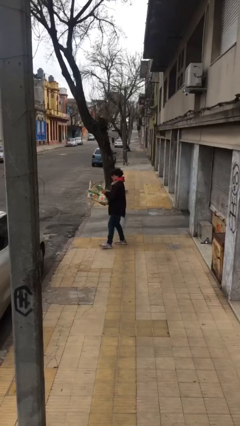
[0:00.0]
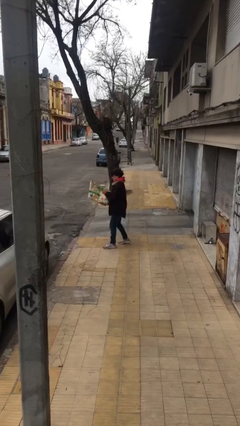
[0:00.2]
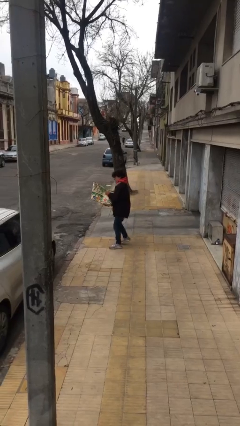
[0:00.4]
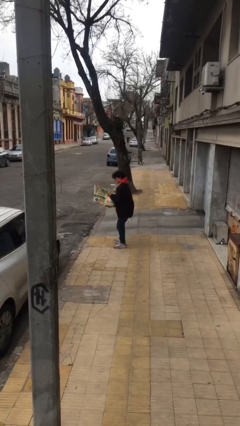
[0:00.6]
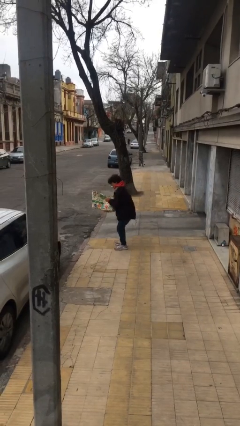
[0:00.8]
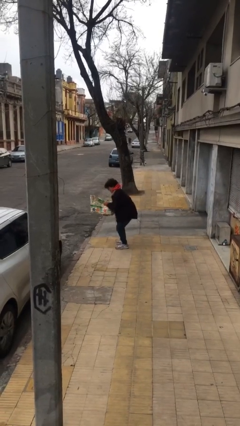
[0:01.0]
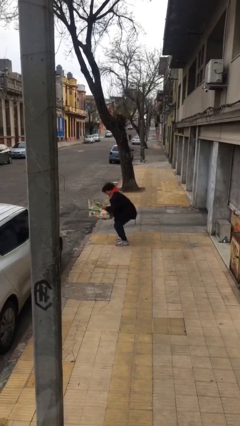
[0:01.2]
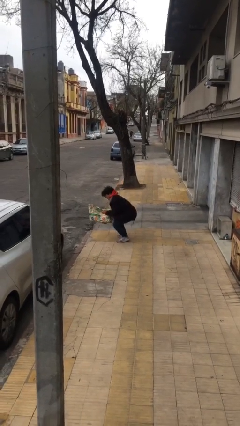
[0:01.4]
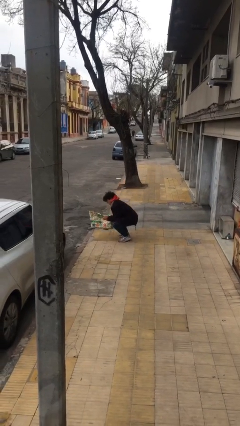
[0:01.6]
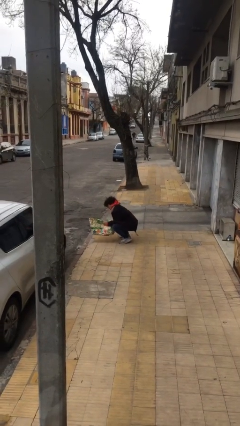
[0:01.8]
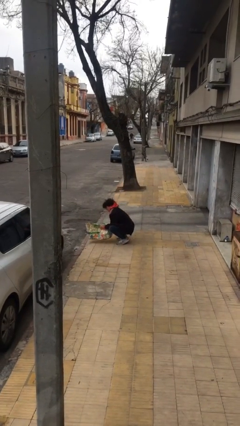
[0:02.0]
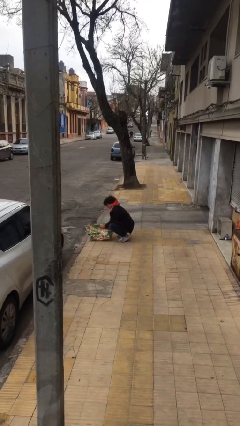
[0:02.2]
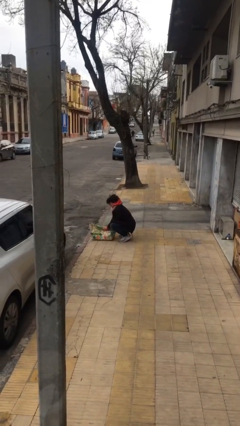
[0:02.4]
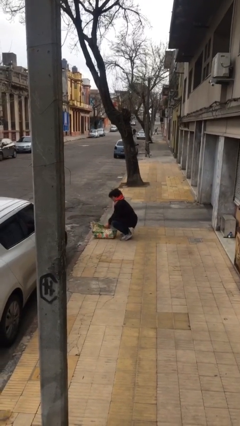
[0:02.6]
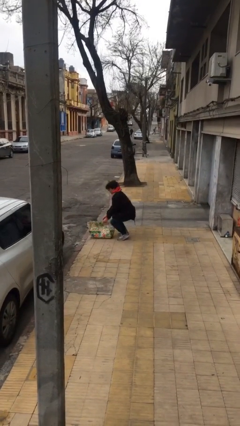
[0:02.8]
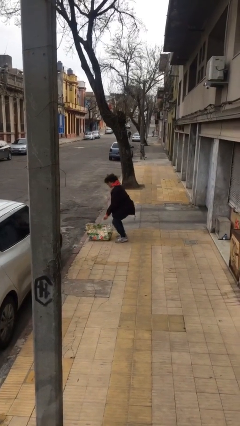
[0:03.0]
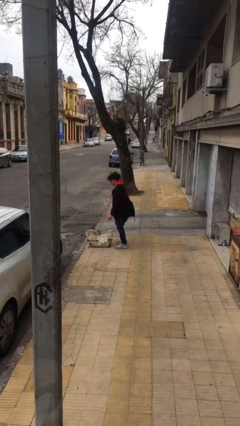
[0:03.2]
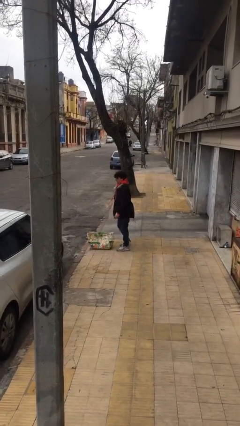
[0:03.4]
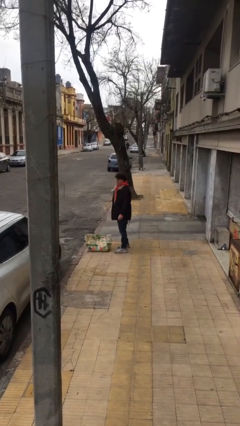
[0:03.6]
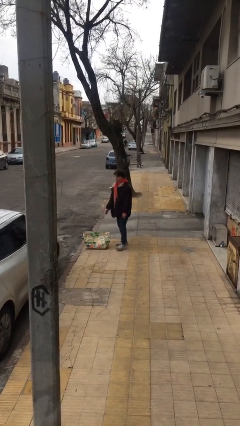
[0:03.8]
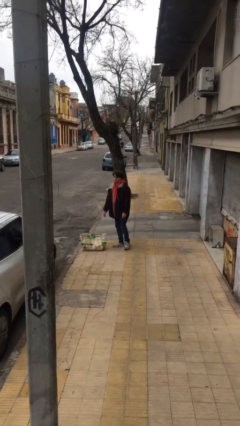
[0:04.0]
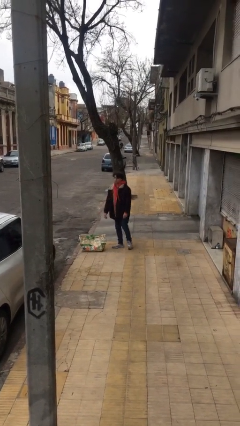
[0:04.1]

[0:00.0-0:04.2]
person puts down object on floor

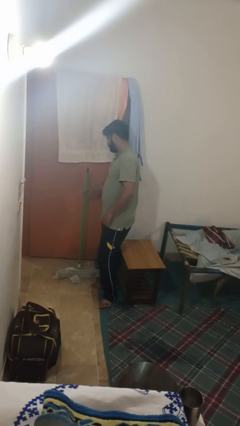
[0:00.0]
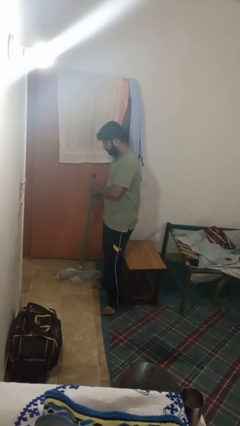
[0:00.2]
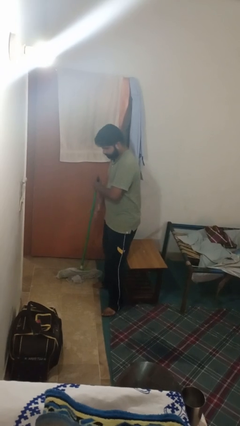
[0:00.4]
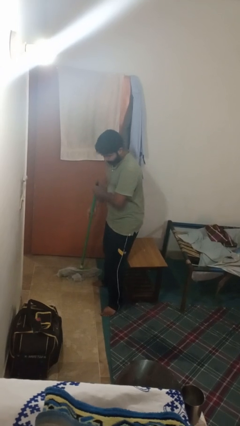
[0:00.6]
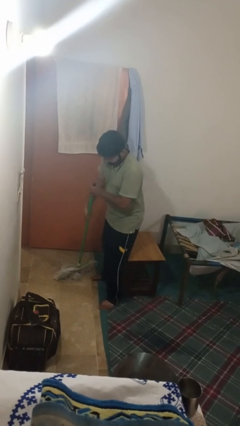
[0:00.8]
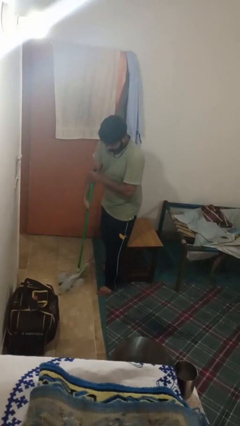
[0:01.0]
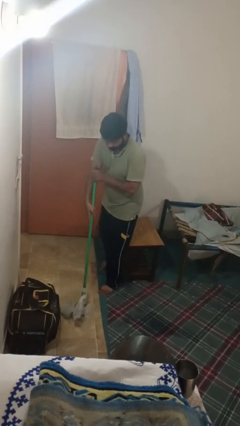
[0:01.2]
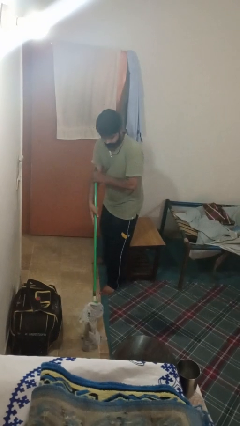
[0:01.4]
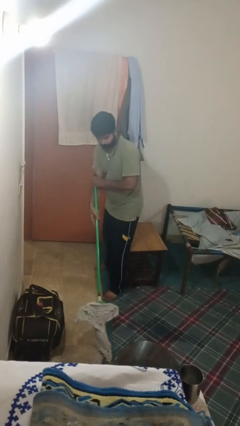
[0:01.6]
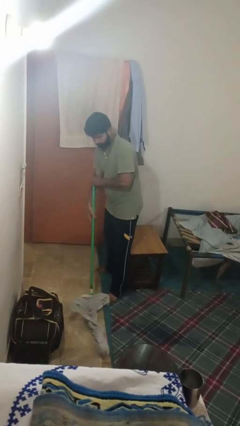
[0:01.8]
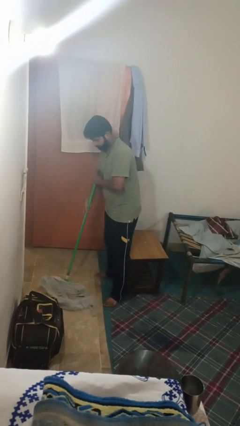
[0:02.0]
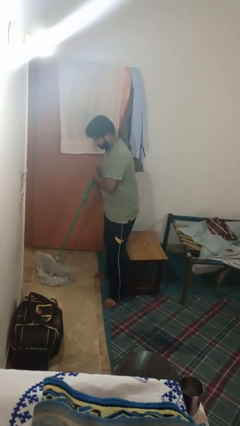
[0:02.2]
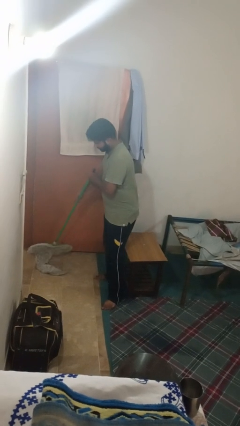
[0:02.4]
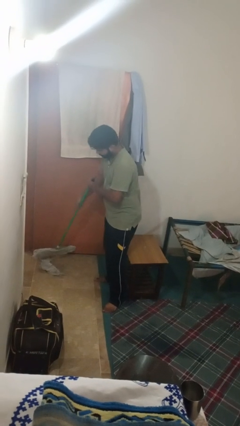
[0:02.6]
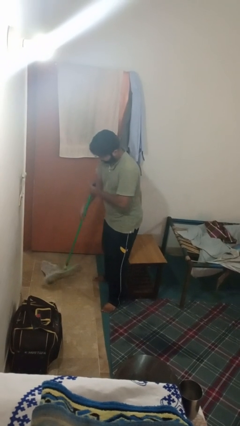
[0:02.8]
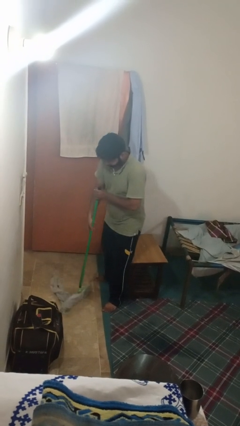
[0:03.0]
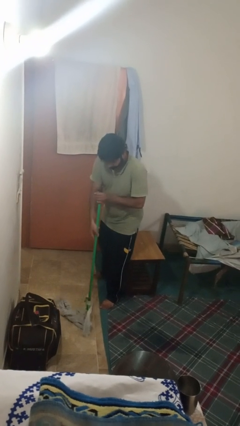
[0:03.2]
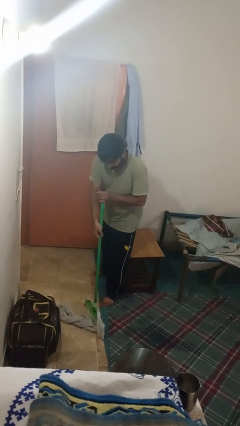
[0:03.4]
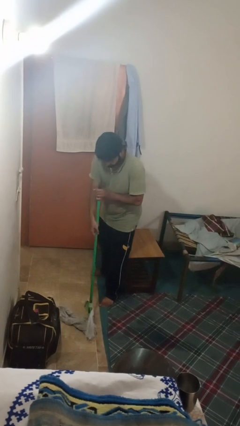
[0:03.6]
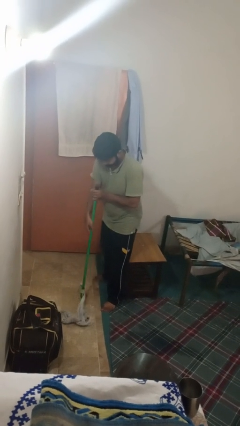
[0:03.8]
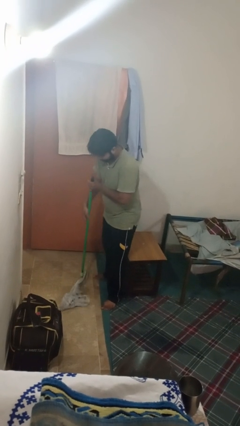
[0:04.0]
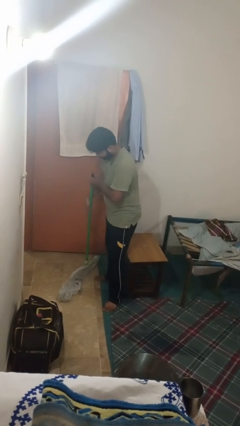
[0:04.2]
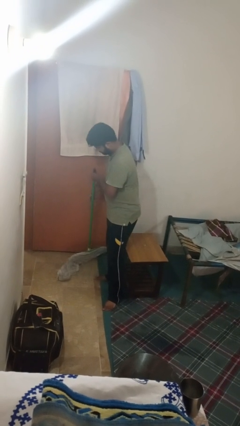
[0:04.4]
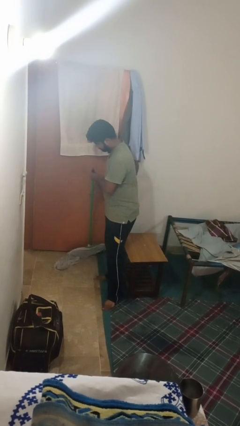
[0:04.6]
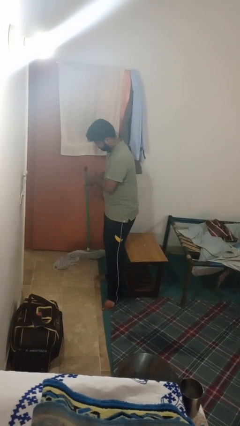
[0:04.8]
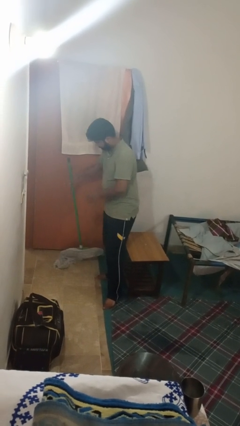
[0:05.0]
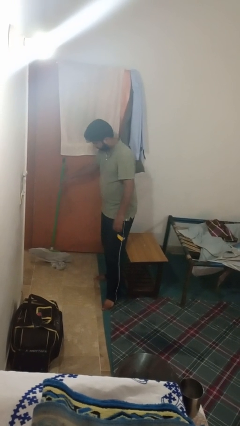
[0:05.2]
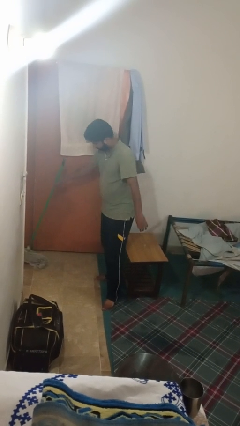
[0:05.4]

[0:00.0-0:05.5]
person mops

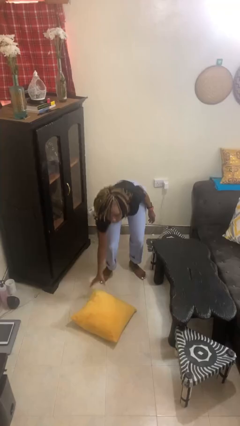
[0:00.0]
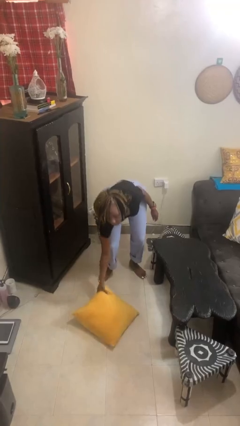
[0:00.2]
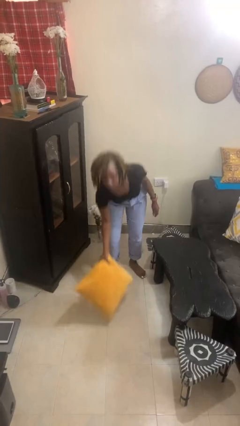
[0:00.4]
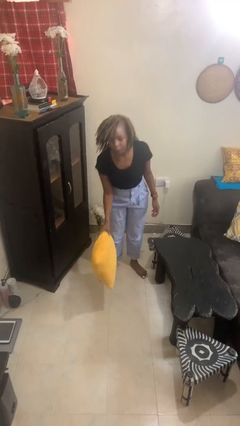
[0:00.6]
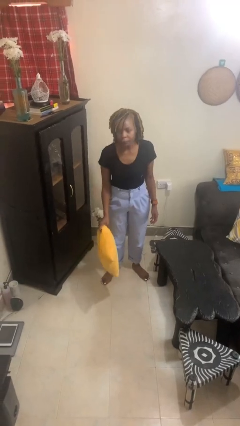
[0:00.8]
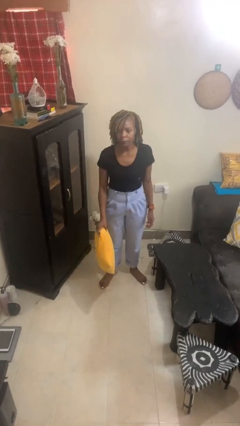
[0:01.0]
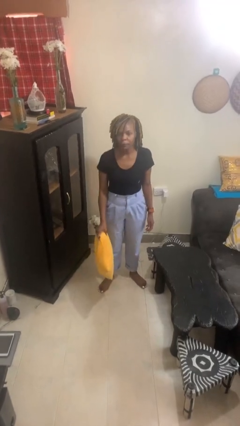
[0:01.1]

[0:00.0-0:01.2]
person picks up object from floor

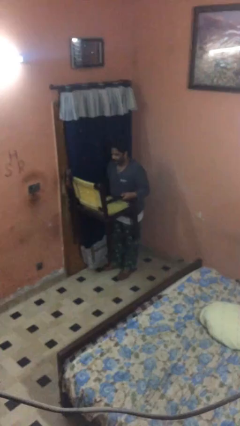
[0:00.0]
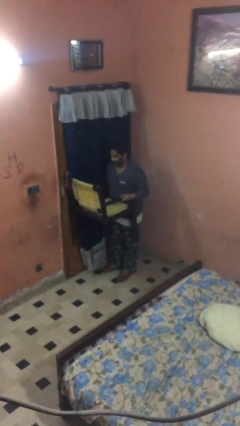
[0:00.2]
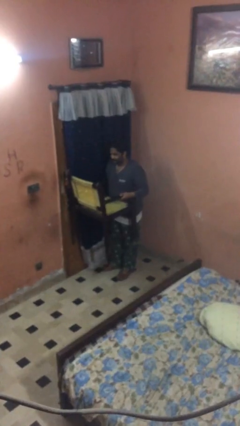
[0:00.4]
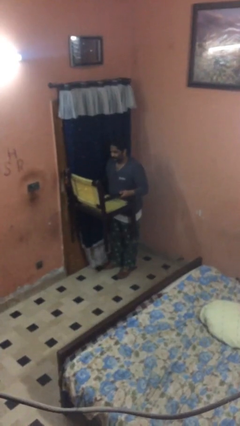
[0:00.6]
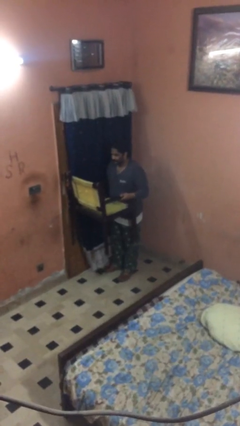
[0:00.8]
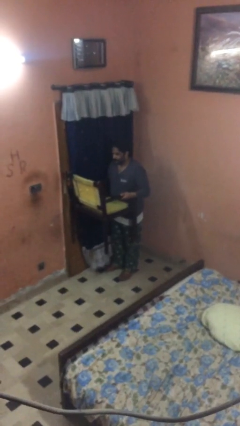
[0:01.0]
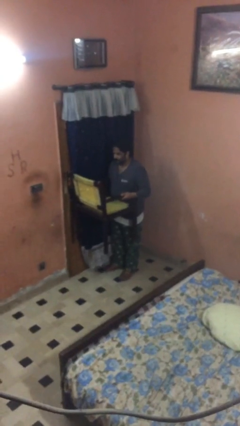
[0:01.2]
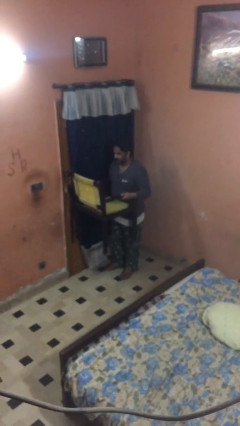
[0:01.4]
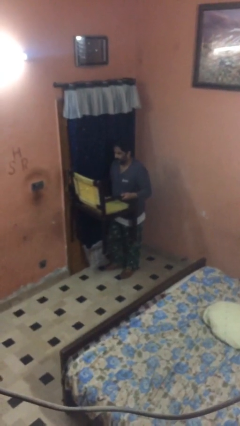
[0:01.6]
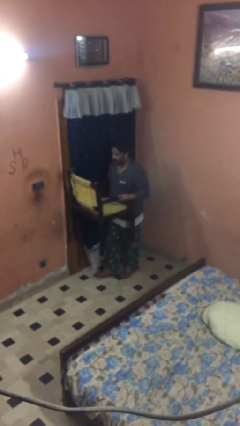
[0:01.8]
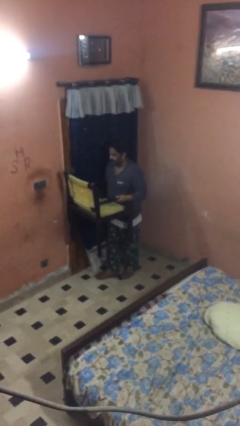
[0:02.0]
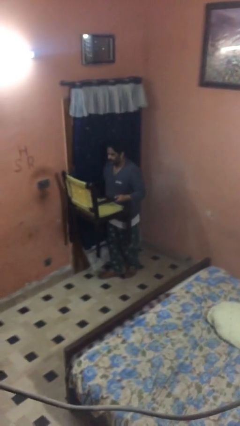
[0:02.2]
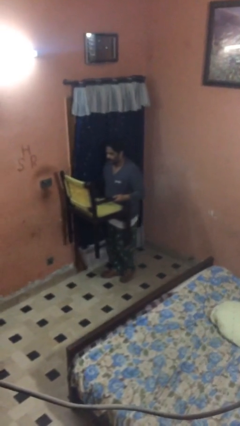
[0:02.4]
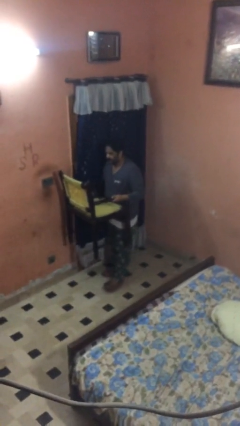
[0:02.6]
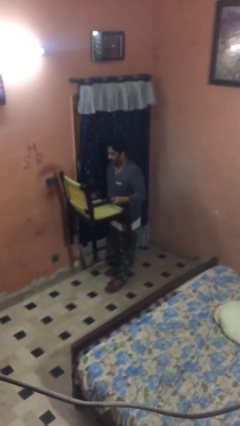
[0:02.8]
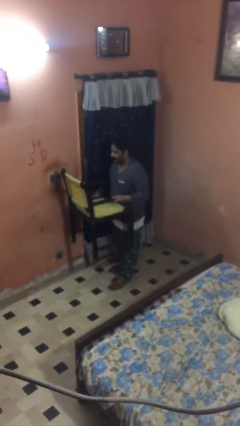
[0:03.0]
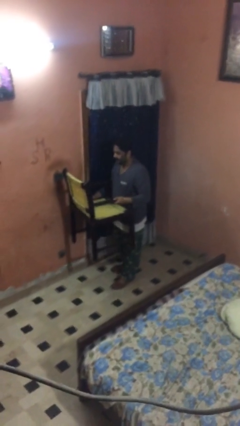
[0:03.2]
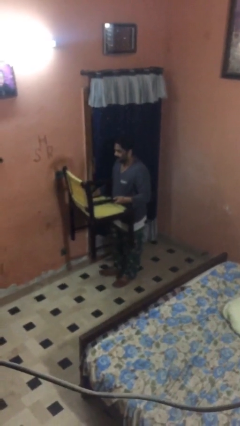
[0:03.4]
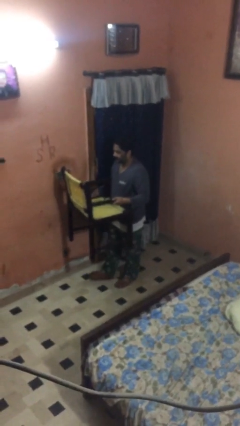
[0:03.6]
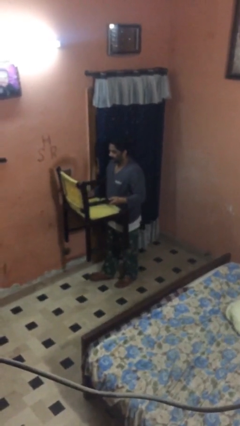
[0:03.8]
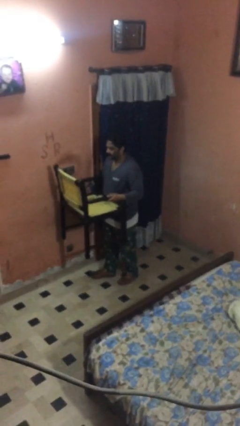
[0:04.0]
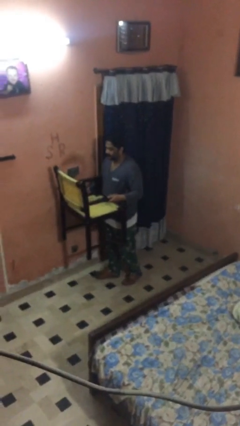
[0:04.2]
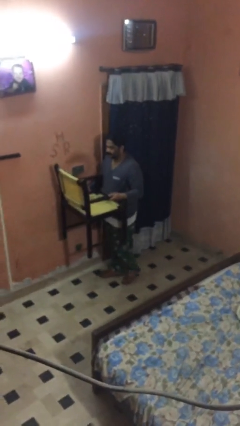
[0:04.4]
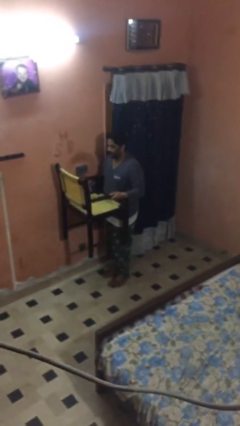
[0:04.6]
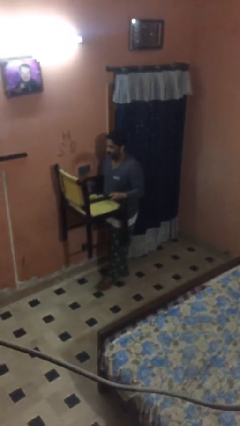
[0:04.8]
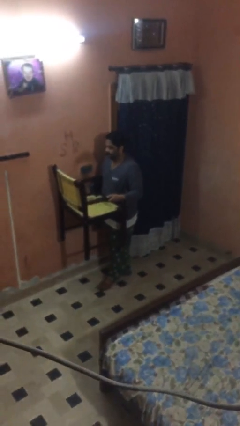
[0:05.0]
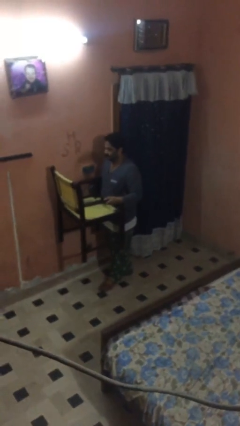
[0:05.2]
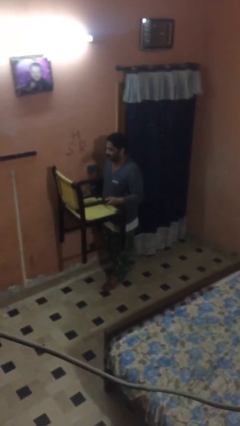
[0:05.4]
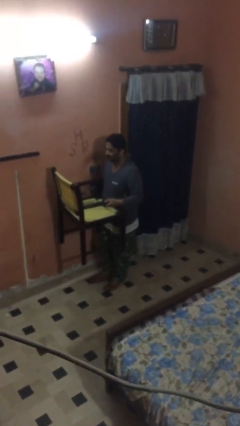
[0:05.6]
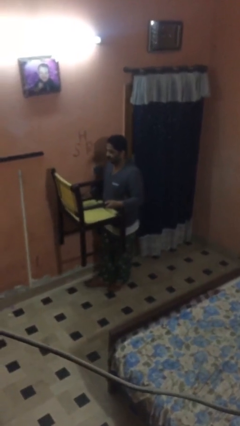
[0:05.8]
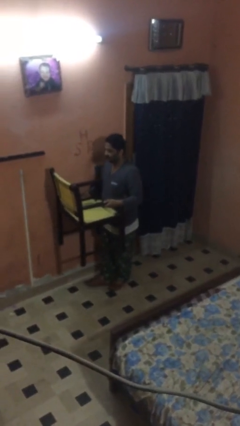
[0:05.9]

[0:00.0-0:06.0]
person carries heavy object

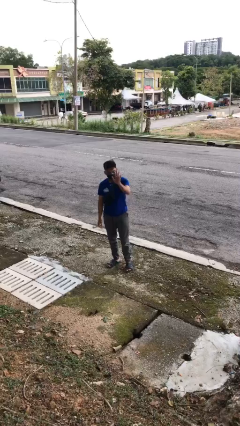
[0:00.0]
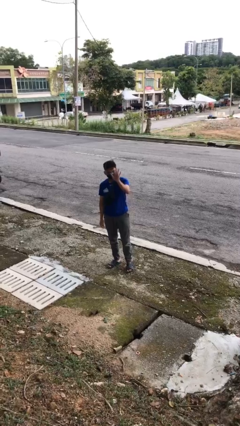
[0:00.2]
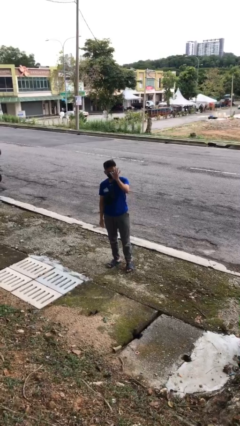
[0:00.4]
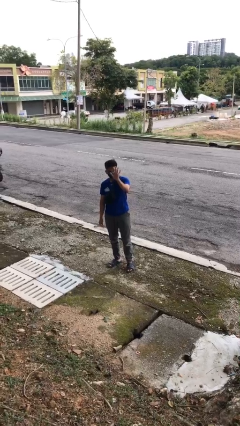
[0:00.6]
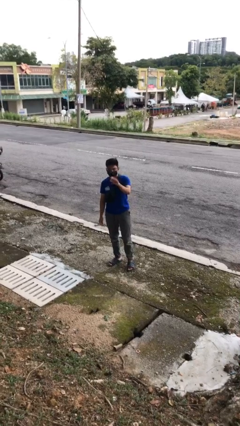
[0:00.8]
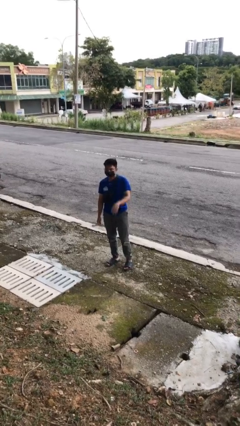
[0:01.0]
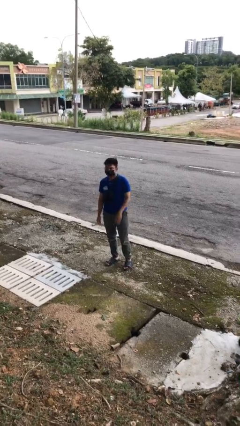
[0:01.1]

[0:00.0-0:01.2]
person gestures stop
